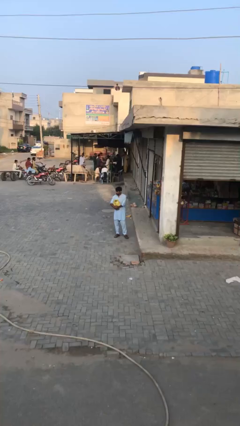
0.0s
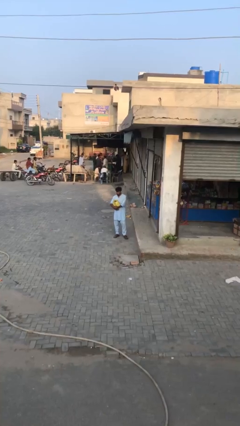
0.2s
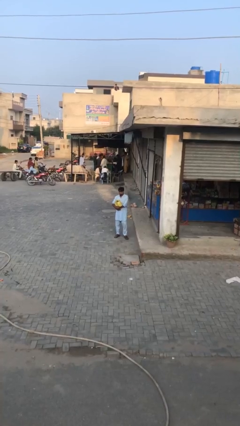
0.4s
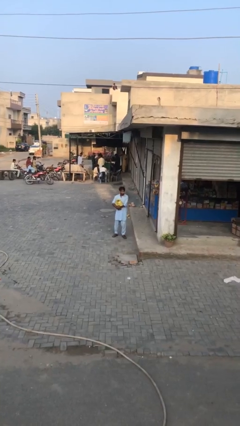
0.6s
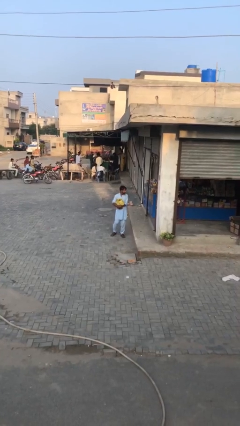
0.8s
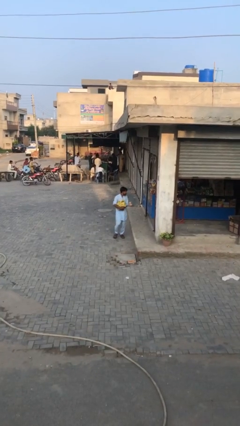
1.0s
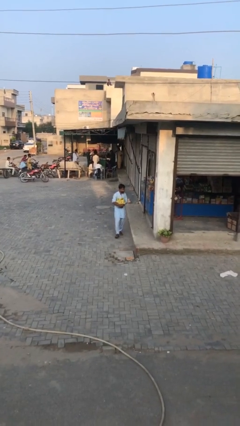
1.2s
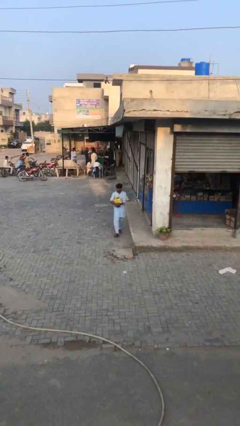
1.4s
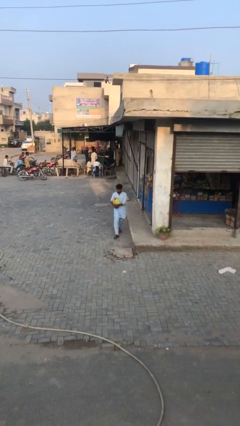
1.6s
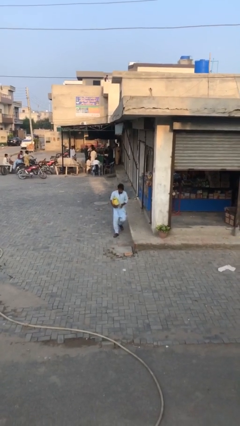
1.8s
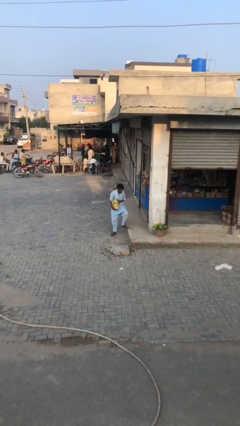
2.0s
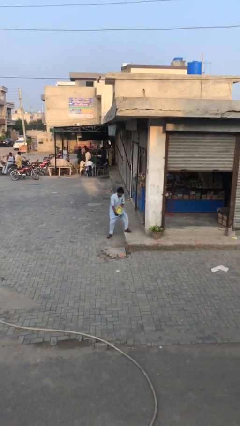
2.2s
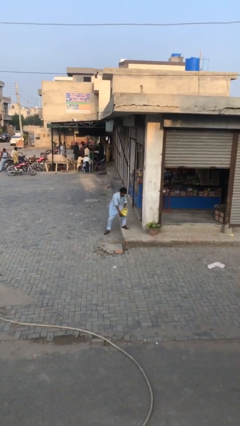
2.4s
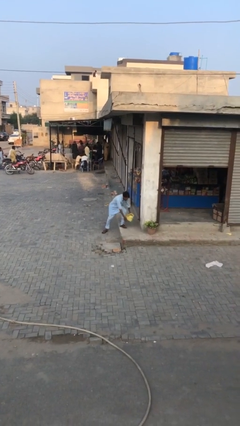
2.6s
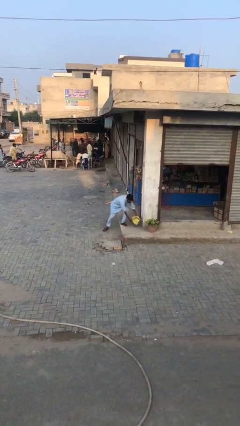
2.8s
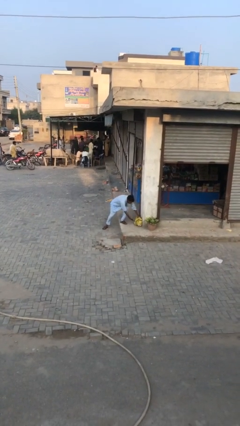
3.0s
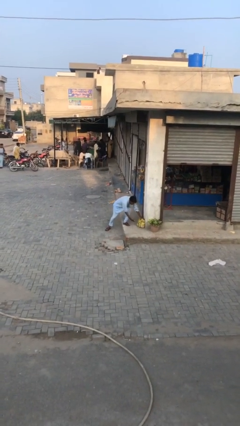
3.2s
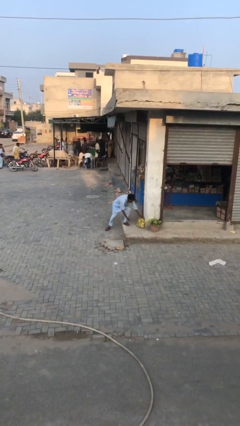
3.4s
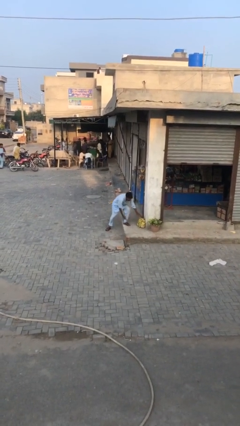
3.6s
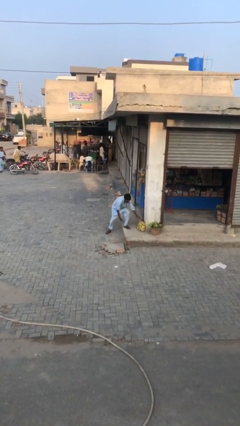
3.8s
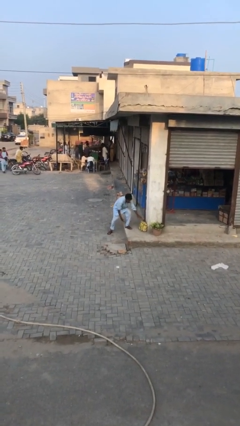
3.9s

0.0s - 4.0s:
person puts down object on floor

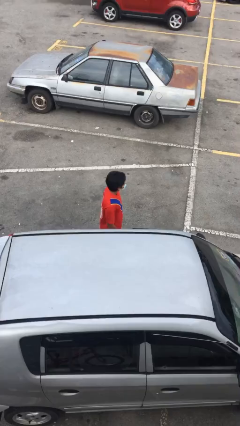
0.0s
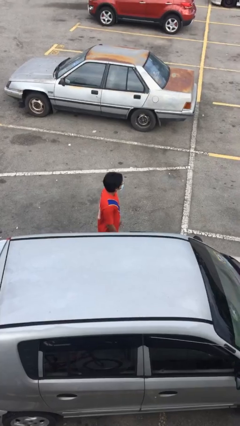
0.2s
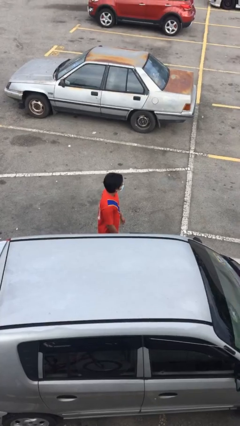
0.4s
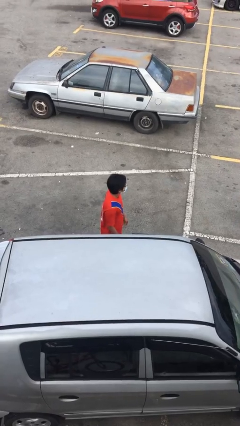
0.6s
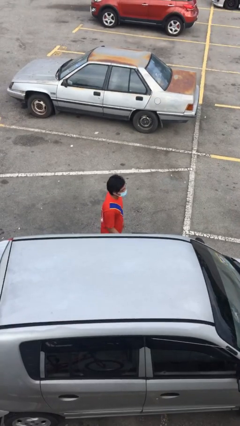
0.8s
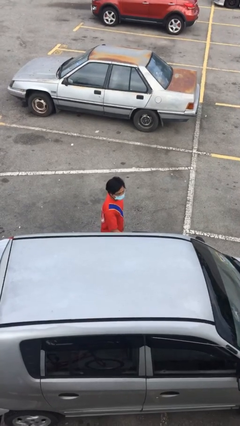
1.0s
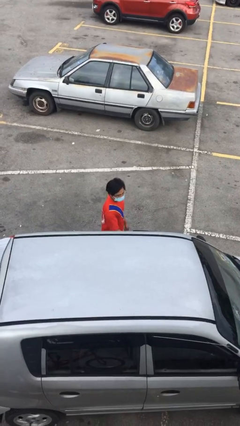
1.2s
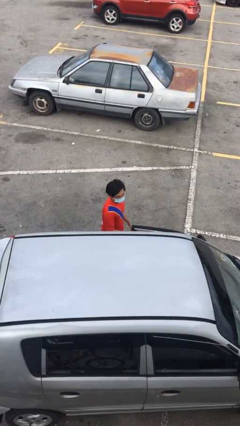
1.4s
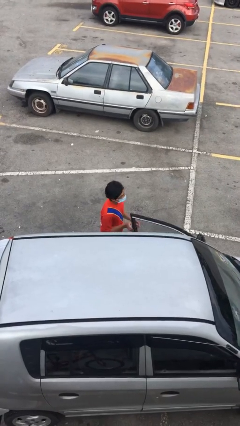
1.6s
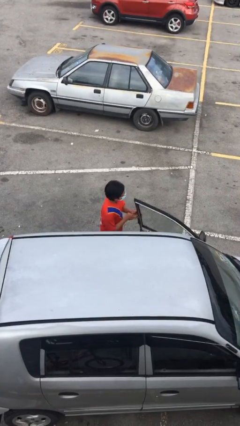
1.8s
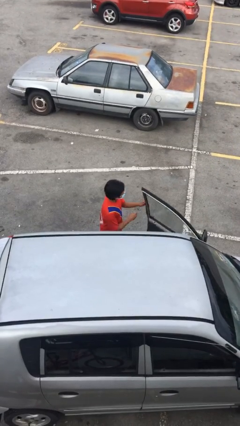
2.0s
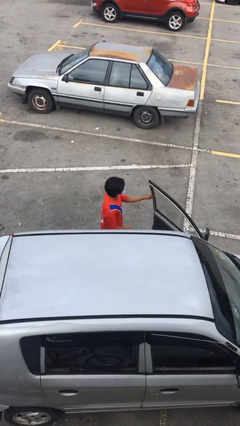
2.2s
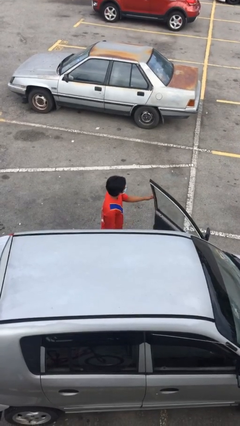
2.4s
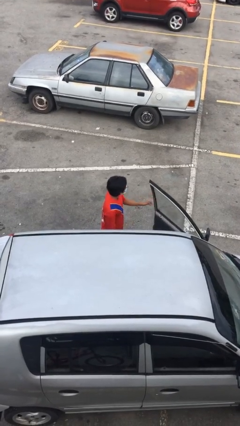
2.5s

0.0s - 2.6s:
person opens car door

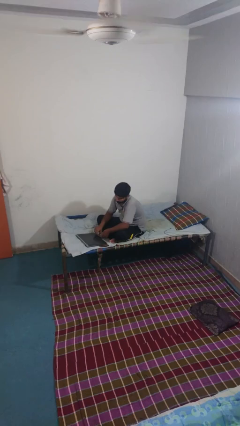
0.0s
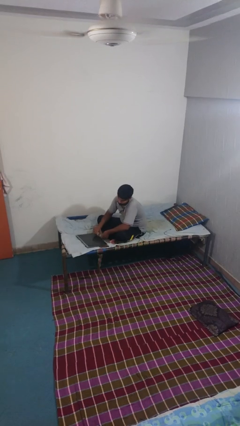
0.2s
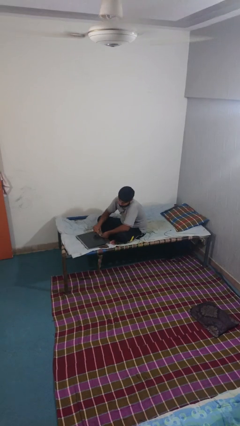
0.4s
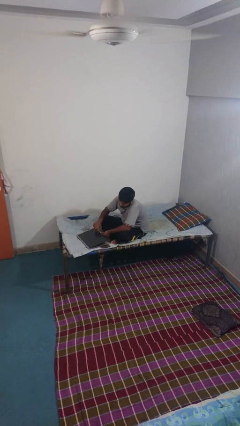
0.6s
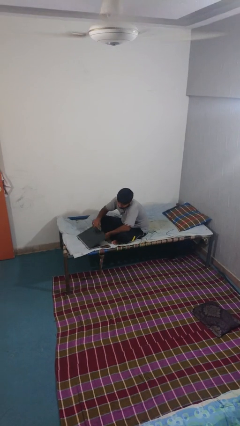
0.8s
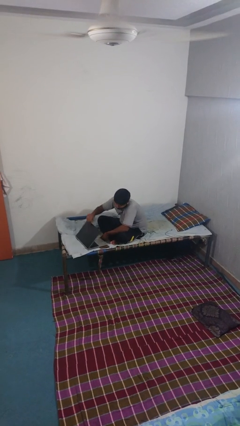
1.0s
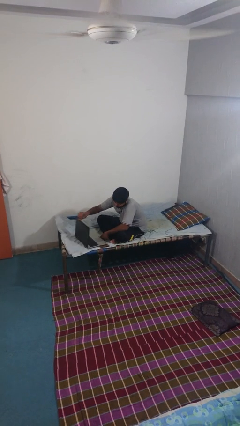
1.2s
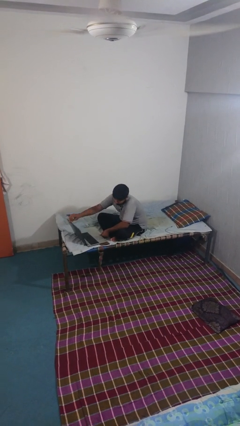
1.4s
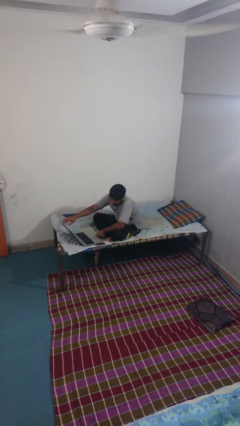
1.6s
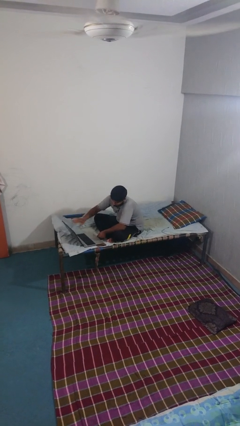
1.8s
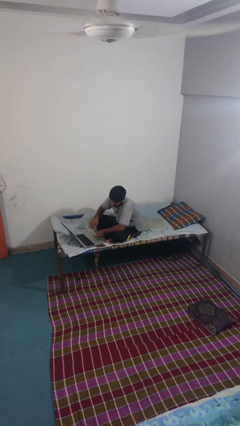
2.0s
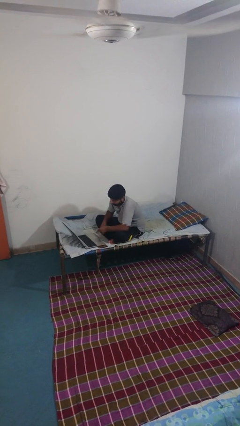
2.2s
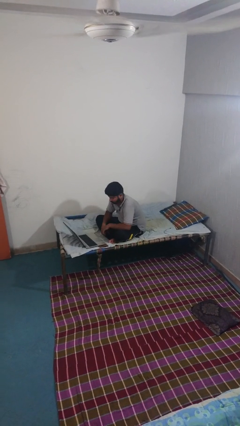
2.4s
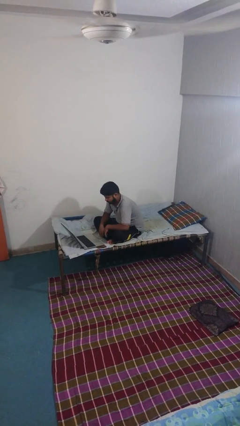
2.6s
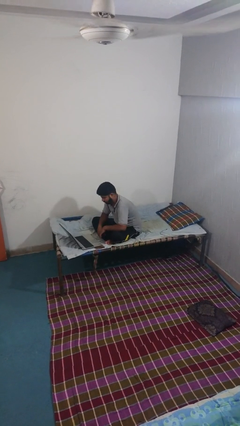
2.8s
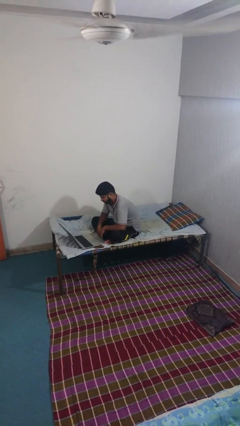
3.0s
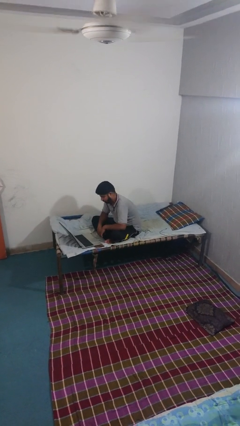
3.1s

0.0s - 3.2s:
person opens laptop

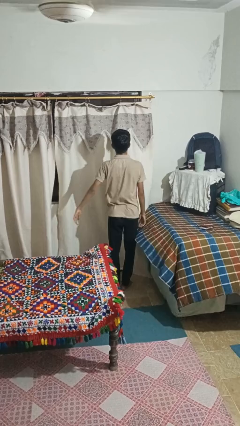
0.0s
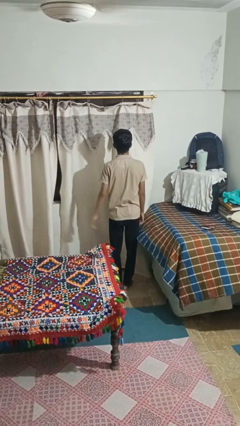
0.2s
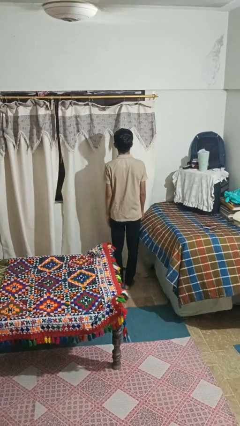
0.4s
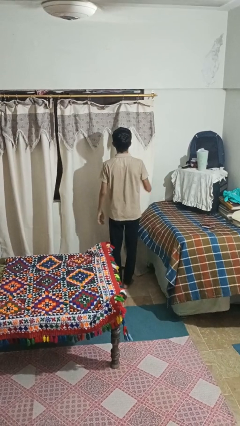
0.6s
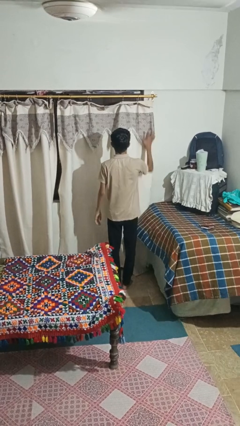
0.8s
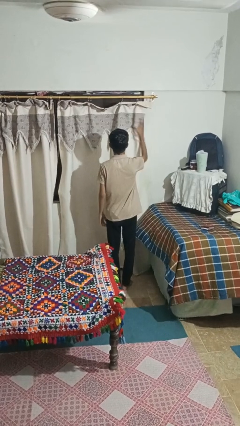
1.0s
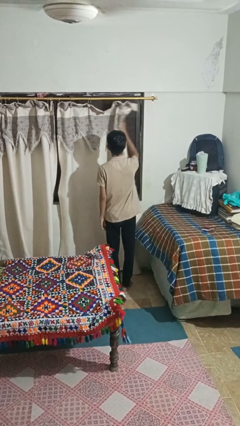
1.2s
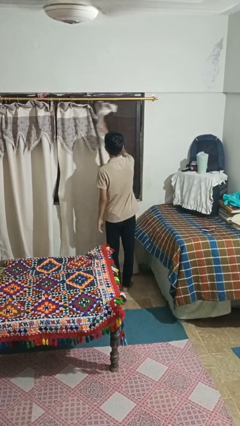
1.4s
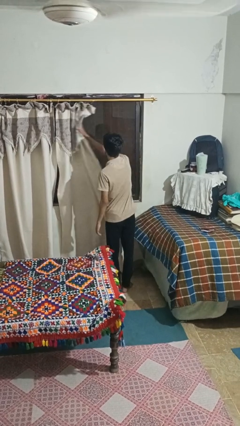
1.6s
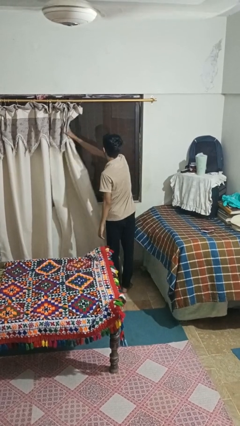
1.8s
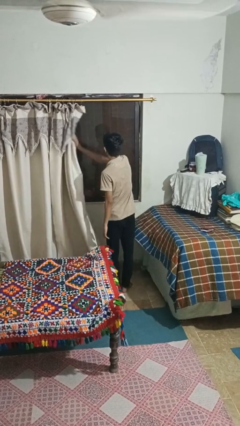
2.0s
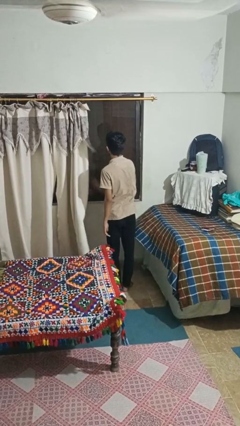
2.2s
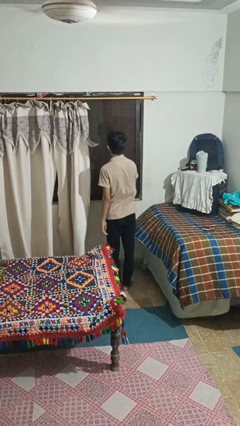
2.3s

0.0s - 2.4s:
person opens curtains

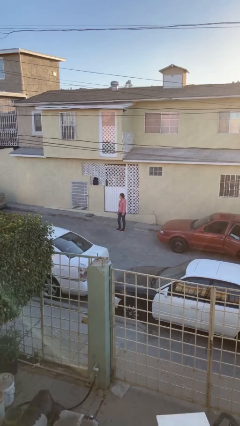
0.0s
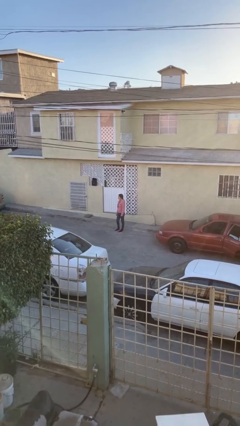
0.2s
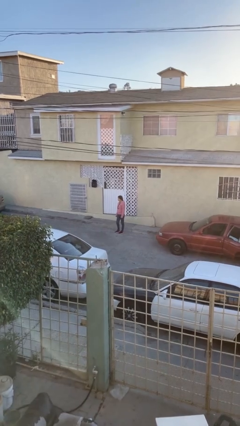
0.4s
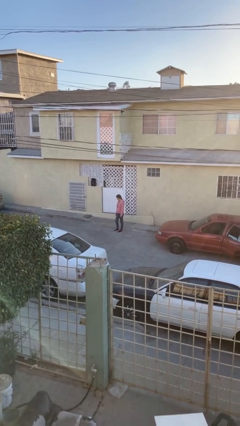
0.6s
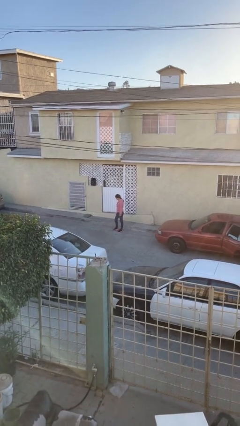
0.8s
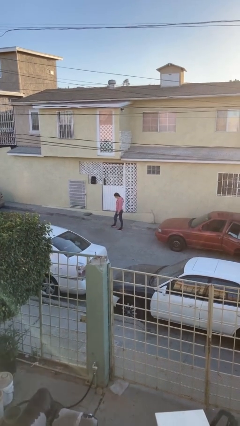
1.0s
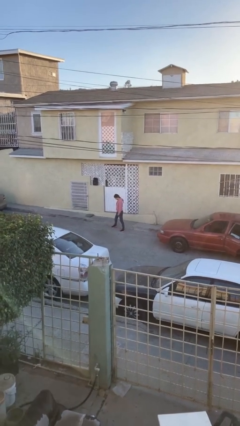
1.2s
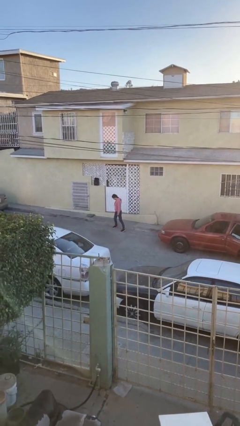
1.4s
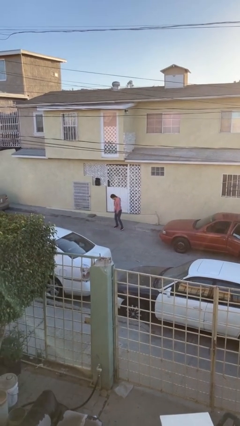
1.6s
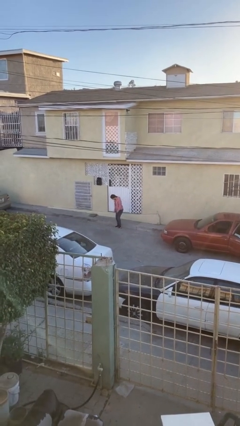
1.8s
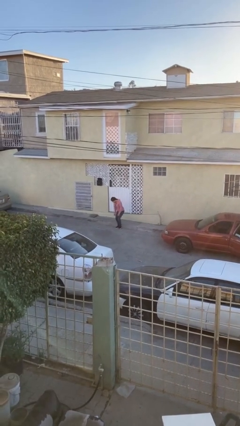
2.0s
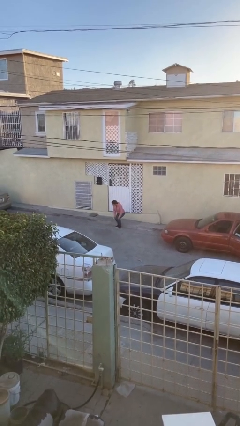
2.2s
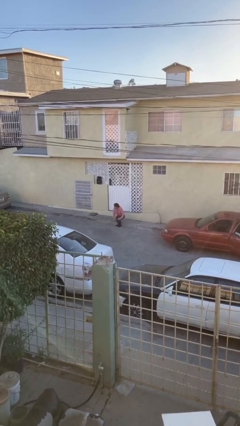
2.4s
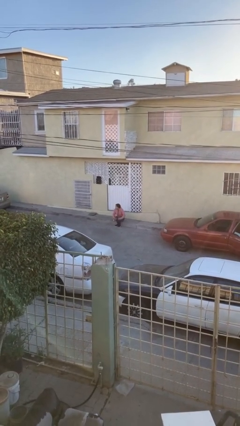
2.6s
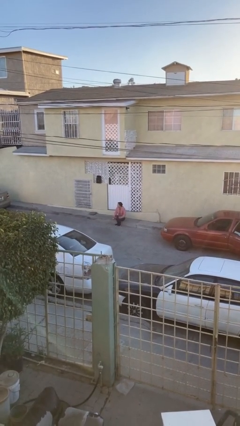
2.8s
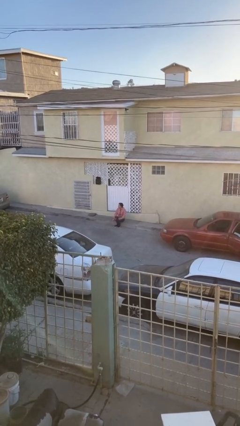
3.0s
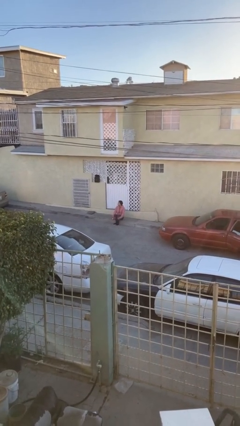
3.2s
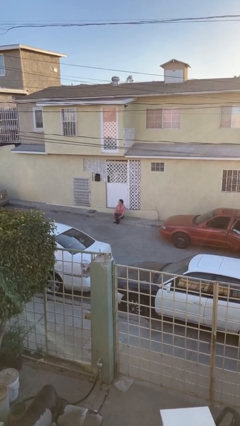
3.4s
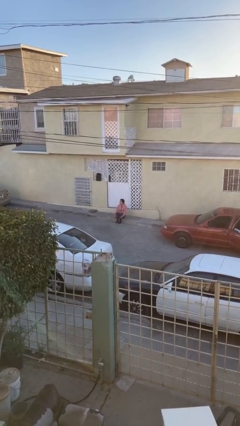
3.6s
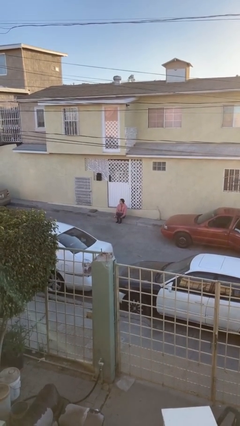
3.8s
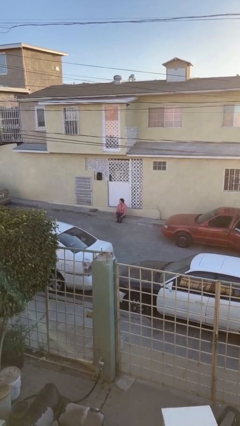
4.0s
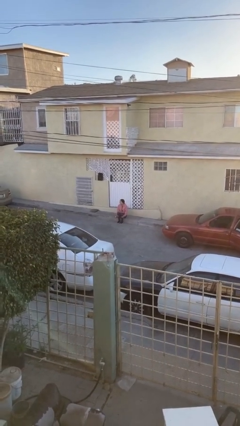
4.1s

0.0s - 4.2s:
person sits down

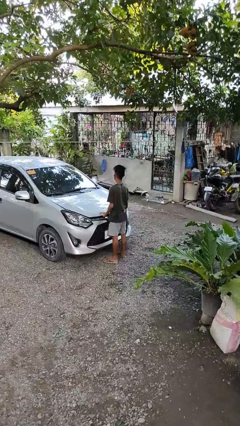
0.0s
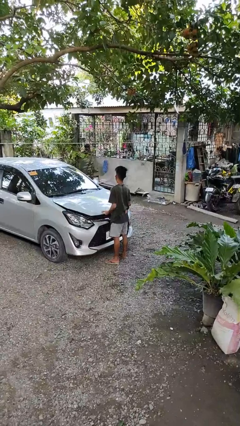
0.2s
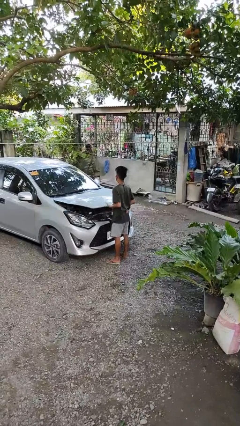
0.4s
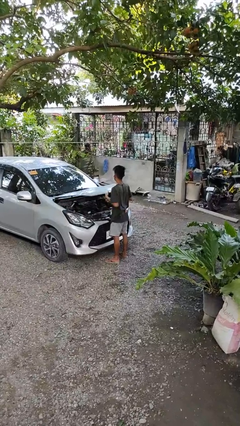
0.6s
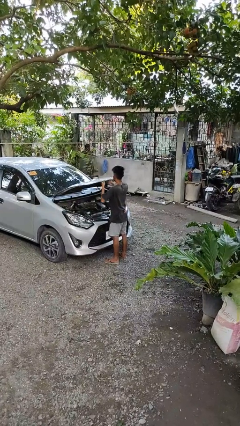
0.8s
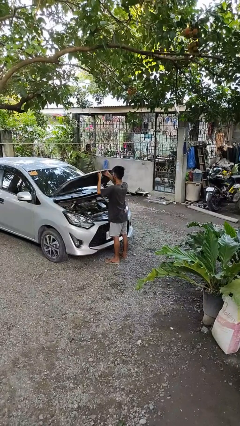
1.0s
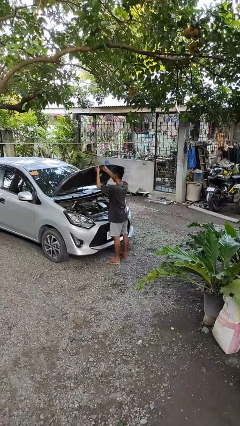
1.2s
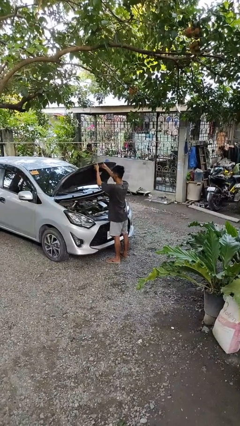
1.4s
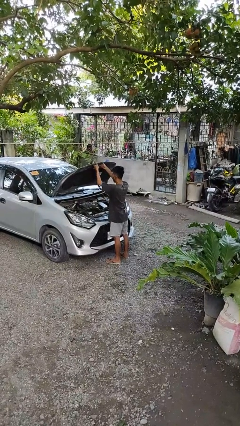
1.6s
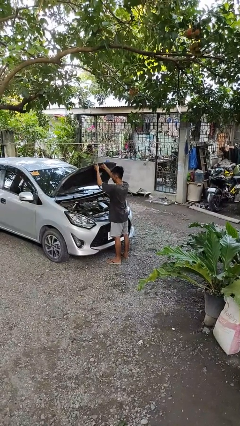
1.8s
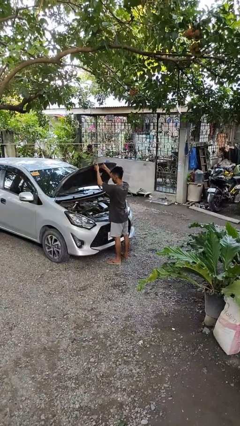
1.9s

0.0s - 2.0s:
person opens car hood
